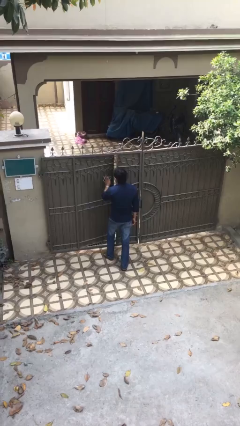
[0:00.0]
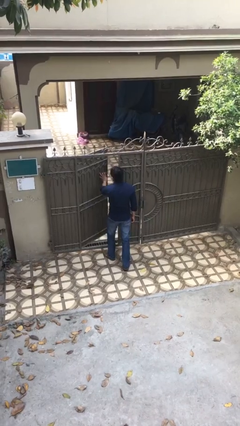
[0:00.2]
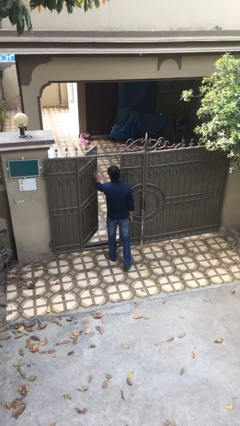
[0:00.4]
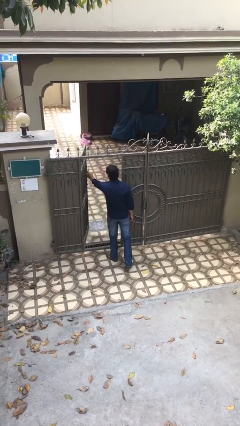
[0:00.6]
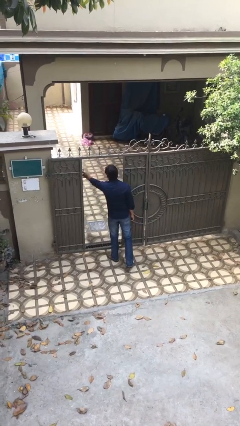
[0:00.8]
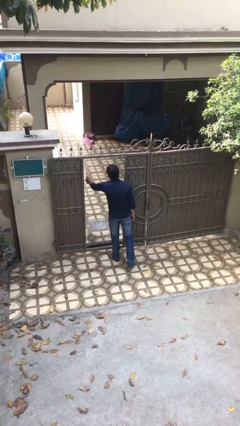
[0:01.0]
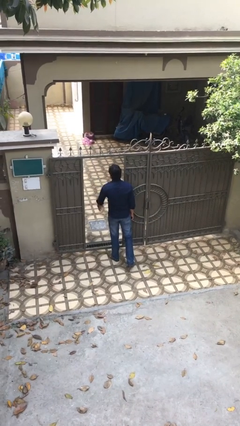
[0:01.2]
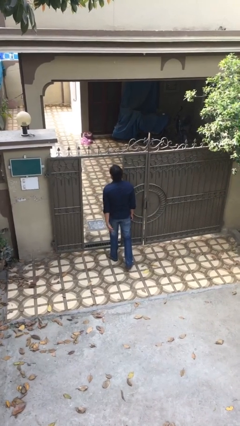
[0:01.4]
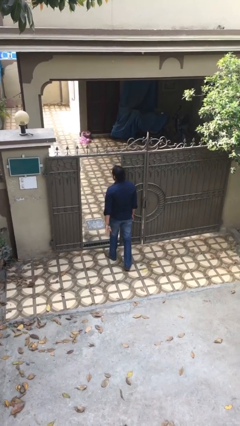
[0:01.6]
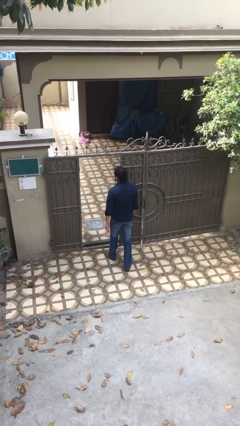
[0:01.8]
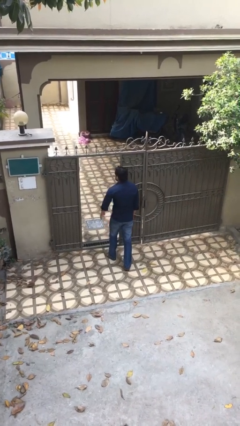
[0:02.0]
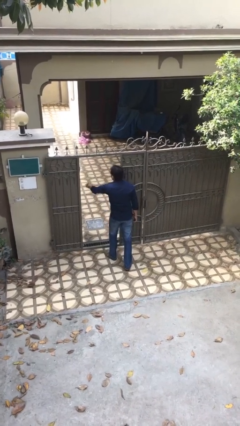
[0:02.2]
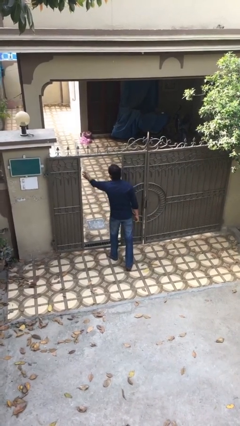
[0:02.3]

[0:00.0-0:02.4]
person opens facility door

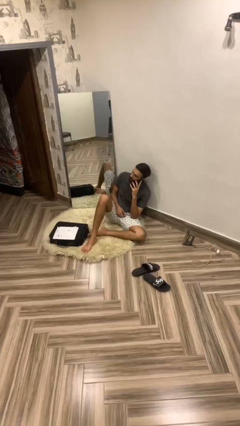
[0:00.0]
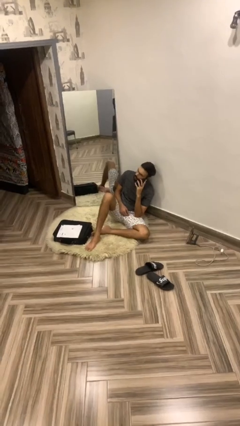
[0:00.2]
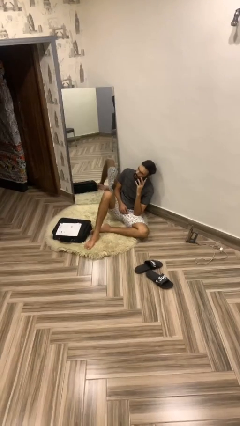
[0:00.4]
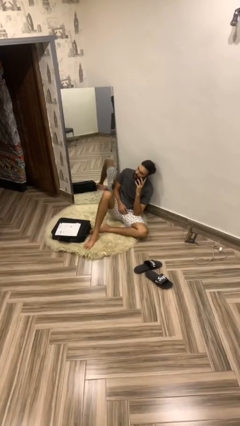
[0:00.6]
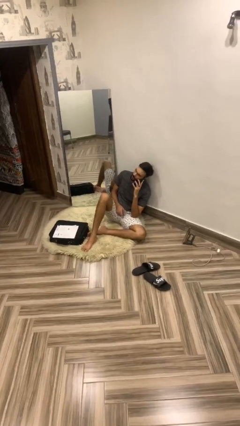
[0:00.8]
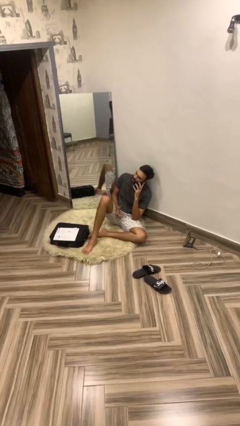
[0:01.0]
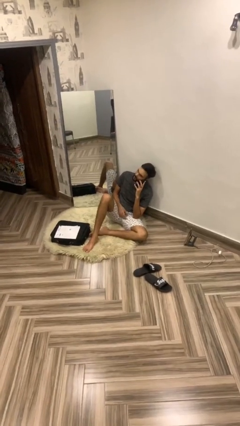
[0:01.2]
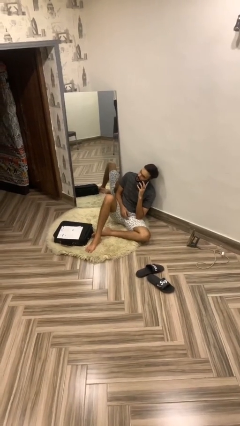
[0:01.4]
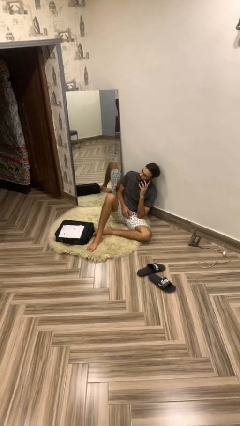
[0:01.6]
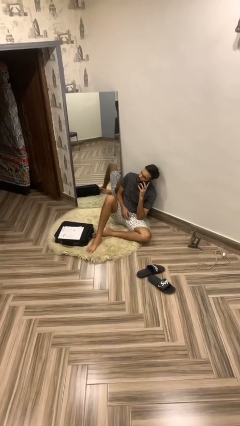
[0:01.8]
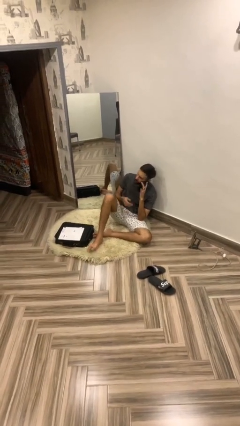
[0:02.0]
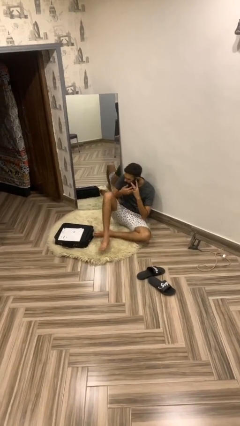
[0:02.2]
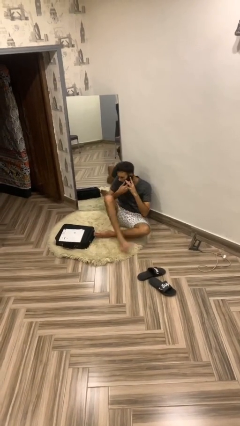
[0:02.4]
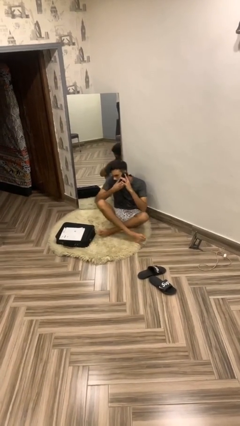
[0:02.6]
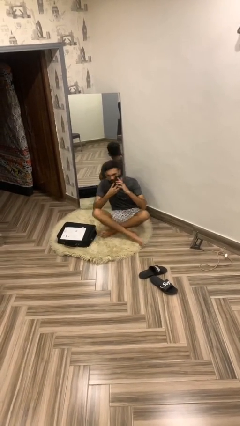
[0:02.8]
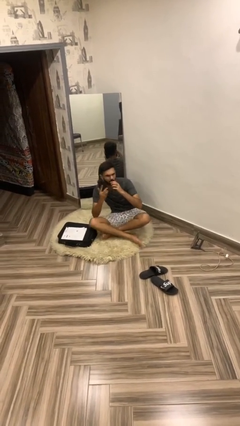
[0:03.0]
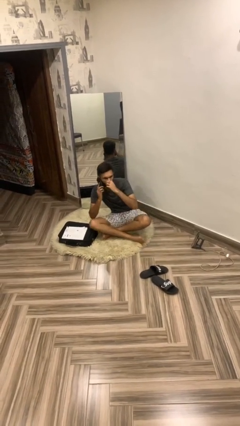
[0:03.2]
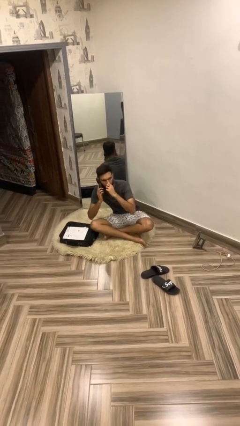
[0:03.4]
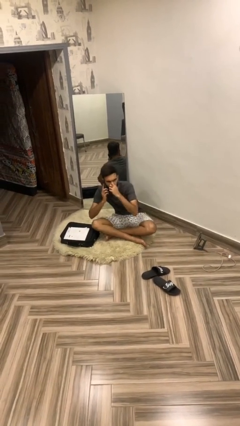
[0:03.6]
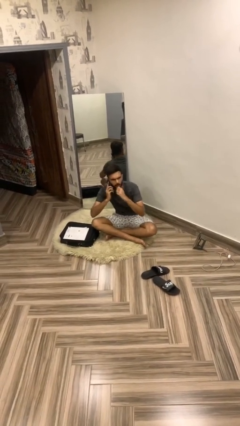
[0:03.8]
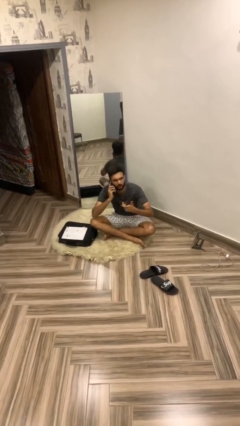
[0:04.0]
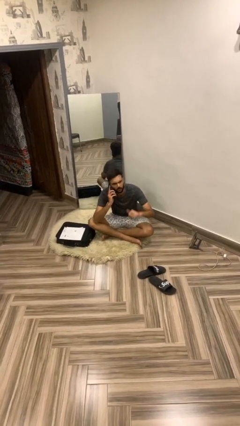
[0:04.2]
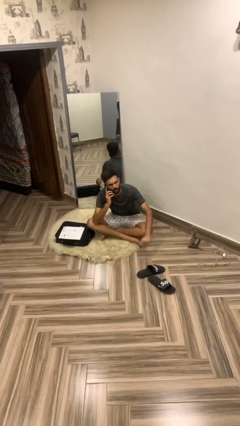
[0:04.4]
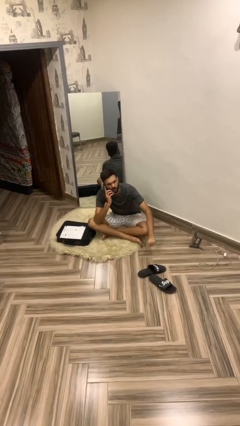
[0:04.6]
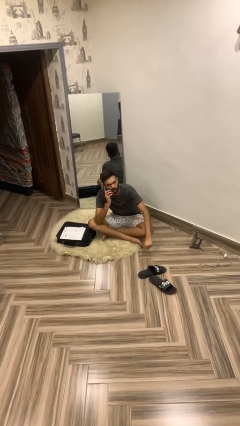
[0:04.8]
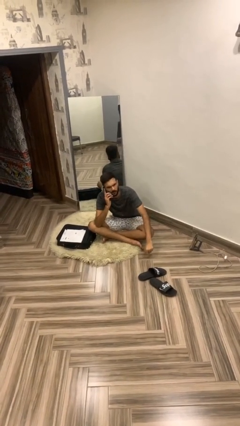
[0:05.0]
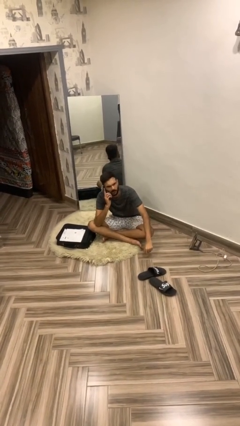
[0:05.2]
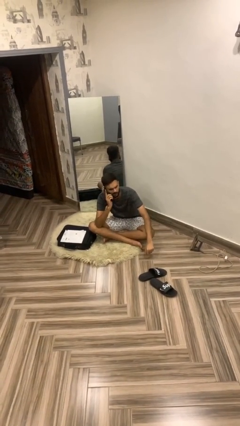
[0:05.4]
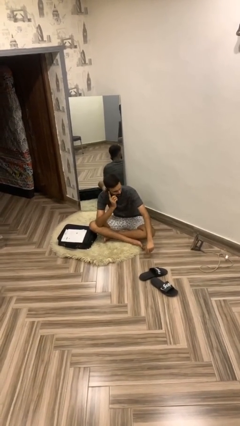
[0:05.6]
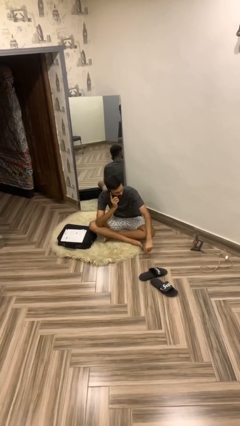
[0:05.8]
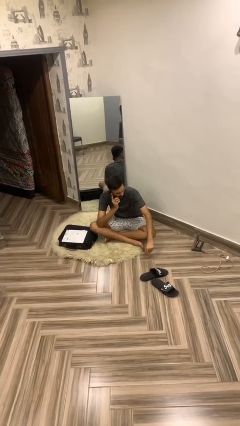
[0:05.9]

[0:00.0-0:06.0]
person talks on phone

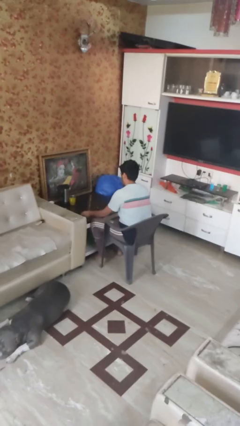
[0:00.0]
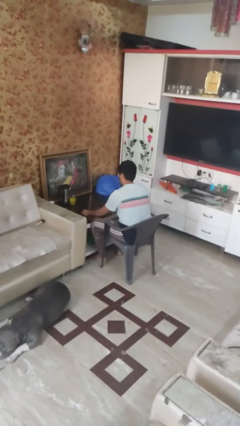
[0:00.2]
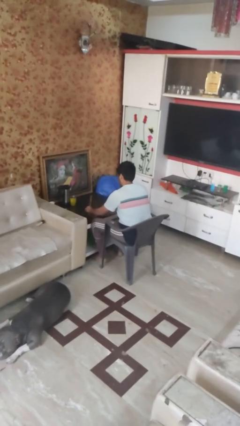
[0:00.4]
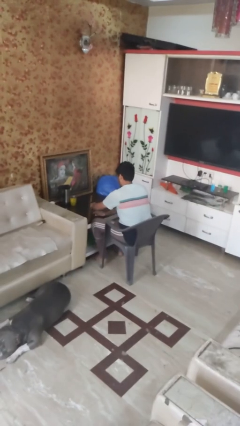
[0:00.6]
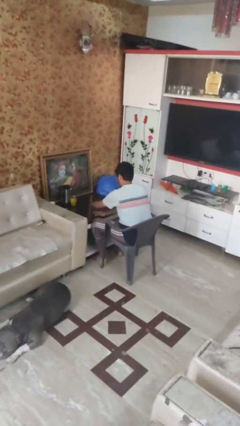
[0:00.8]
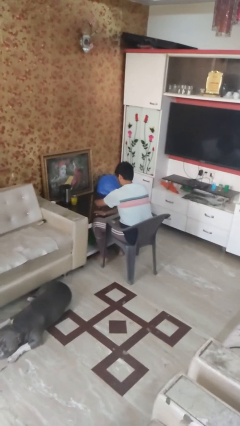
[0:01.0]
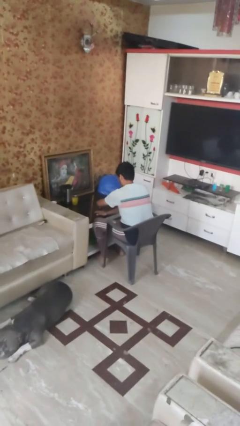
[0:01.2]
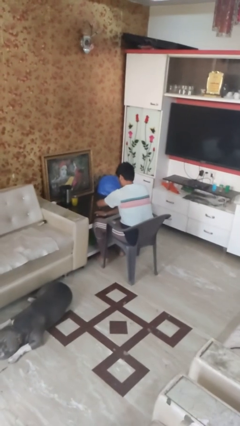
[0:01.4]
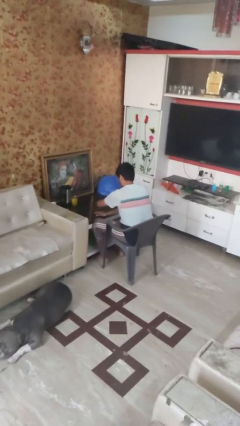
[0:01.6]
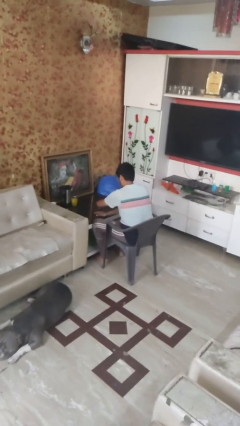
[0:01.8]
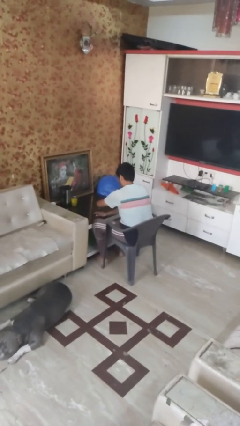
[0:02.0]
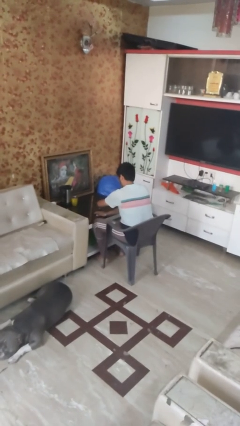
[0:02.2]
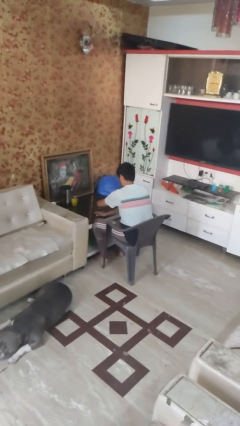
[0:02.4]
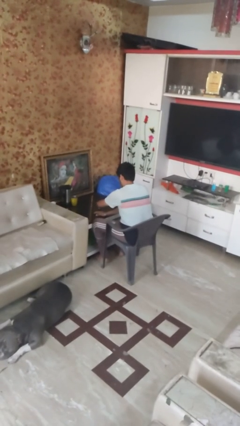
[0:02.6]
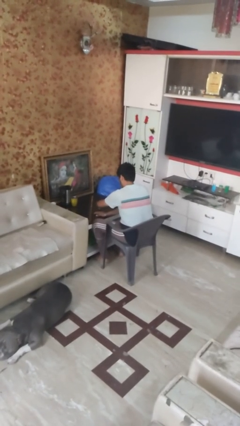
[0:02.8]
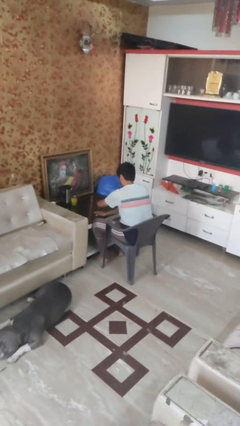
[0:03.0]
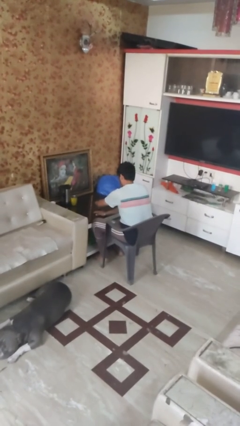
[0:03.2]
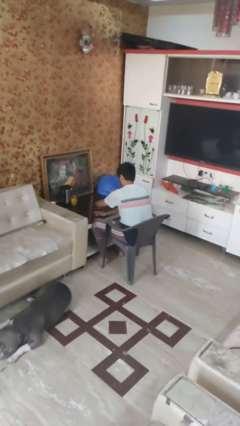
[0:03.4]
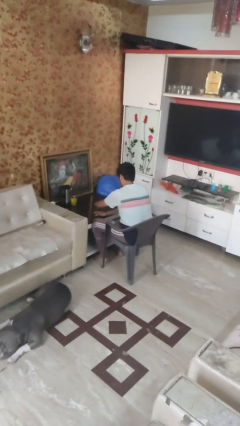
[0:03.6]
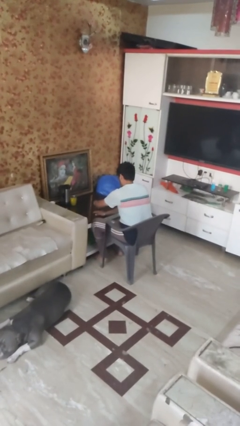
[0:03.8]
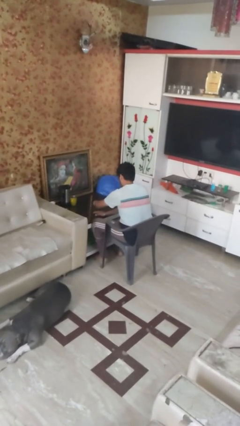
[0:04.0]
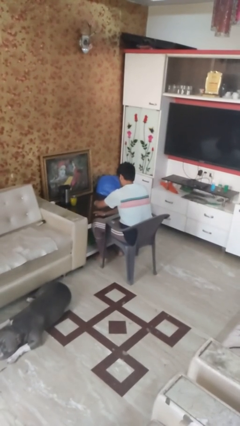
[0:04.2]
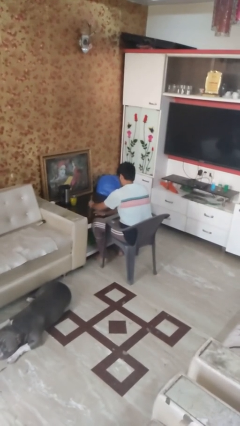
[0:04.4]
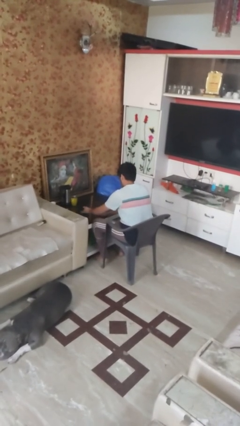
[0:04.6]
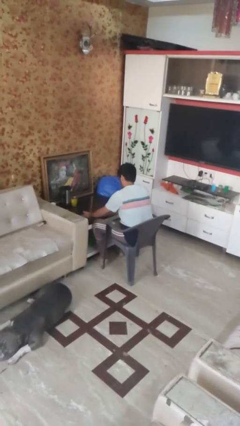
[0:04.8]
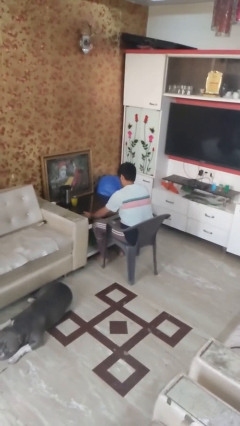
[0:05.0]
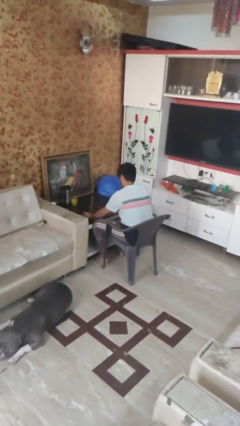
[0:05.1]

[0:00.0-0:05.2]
person paints fingernails

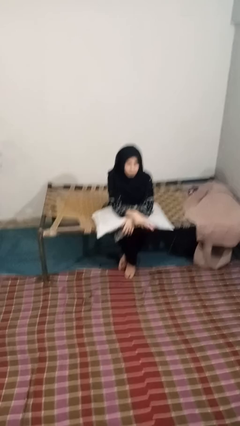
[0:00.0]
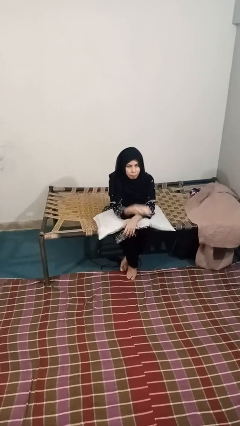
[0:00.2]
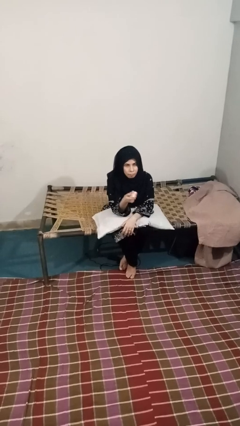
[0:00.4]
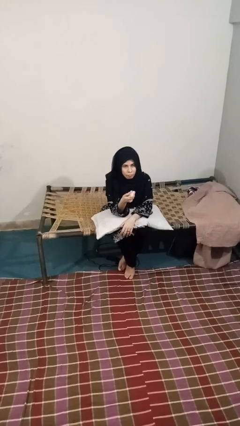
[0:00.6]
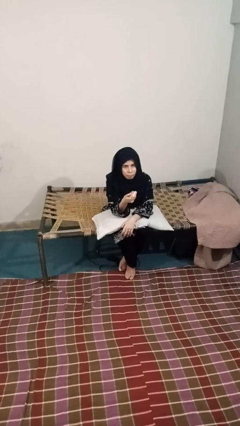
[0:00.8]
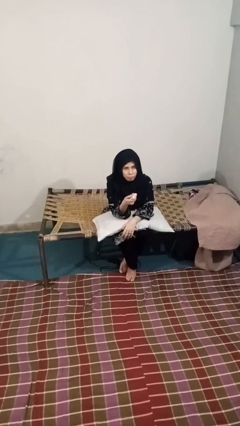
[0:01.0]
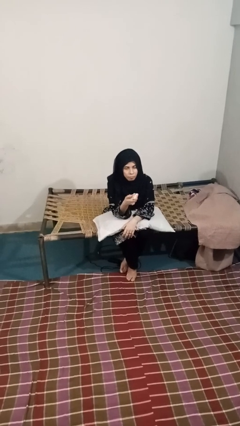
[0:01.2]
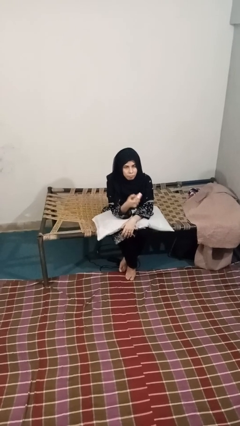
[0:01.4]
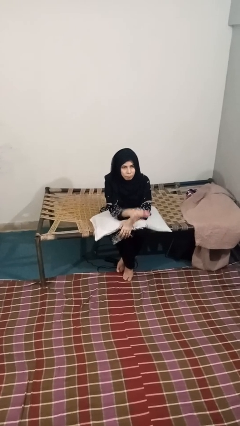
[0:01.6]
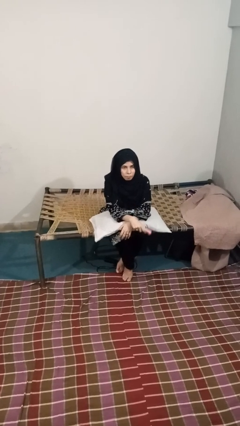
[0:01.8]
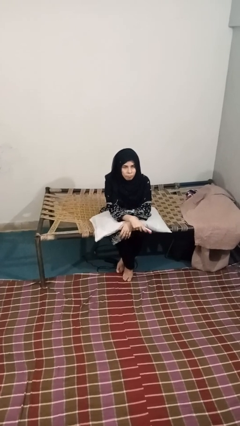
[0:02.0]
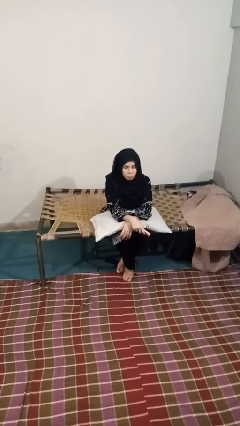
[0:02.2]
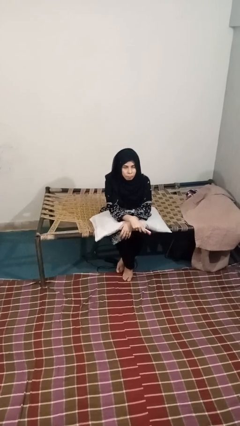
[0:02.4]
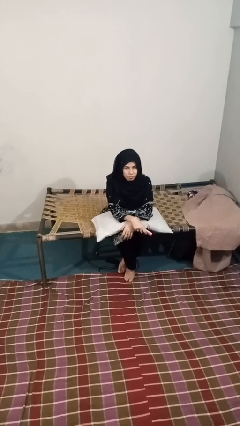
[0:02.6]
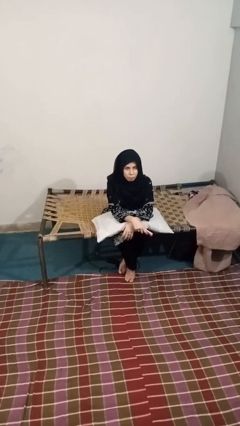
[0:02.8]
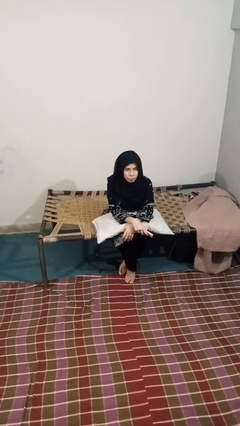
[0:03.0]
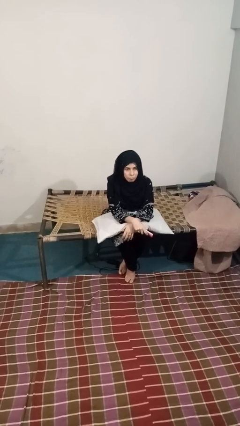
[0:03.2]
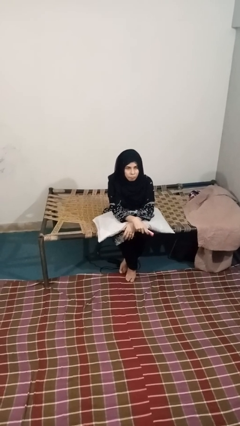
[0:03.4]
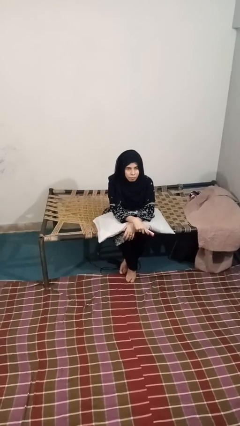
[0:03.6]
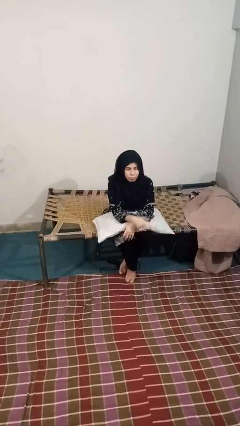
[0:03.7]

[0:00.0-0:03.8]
person uses television remote

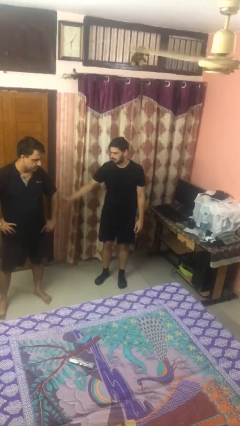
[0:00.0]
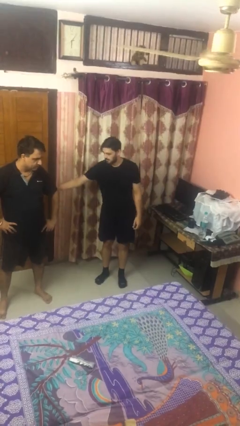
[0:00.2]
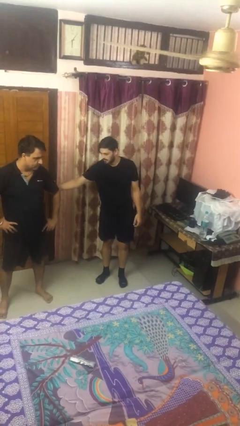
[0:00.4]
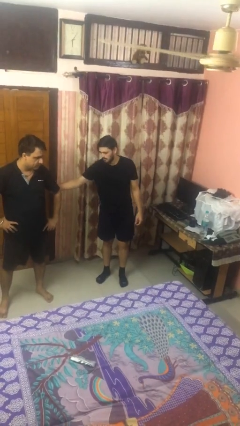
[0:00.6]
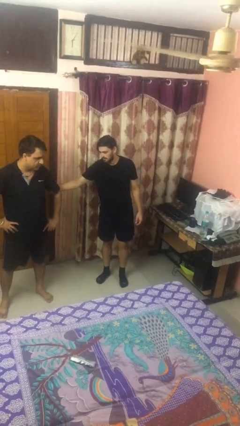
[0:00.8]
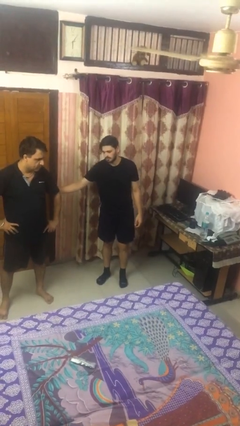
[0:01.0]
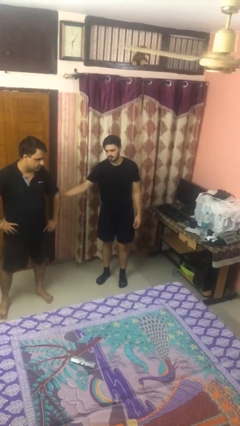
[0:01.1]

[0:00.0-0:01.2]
person grabs person by bicep
